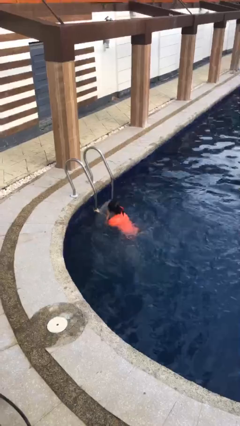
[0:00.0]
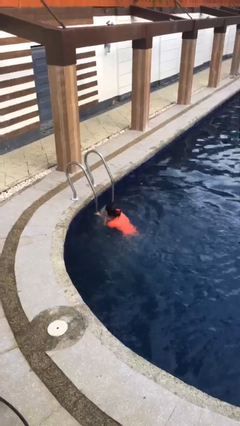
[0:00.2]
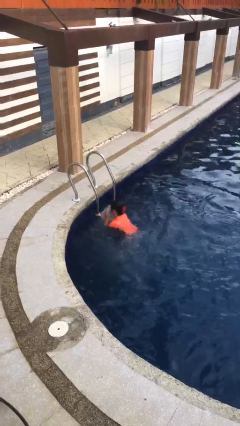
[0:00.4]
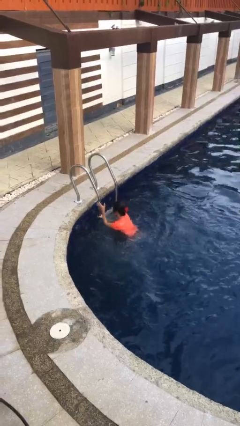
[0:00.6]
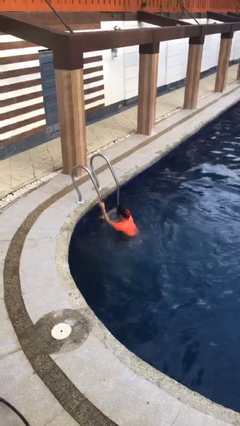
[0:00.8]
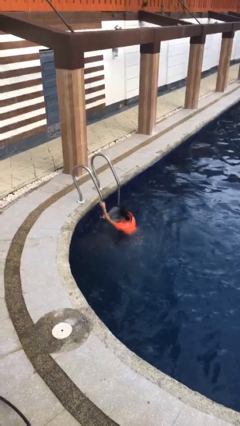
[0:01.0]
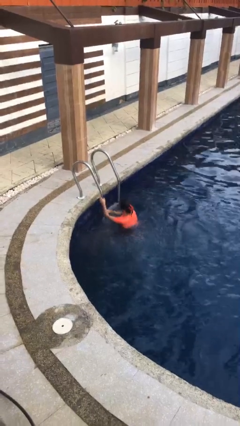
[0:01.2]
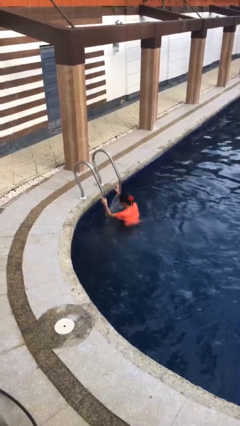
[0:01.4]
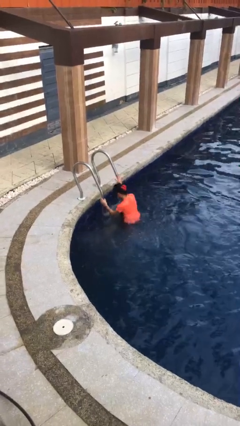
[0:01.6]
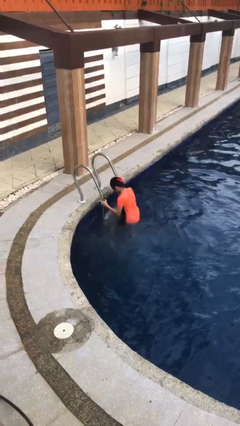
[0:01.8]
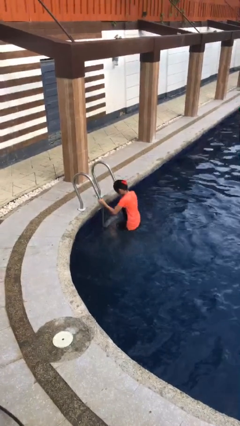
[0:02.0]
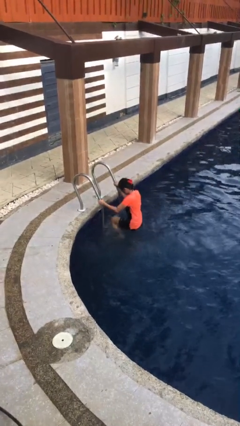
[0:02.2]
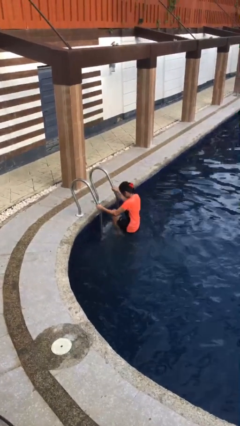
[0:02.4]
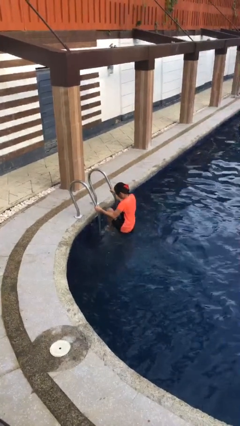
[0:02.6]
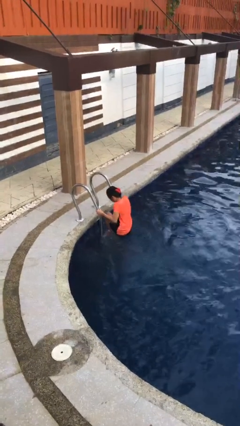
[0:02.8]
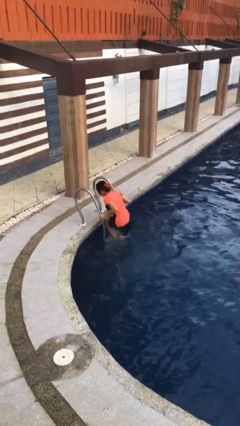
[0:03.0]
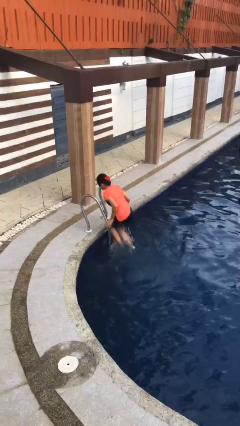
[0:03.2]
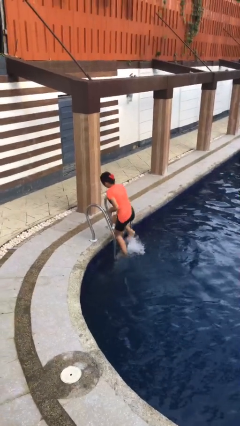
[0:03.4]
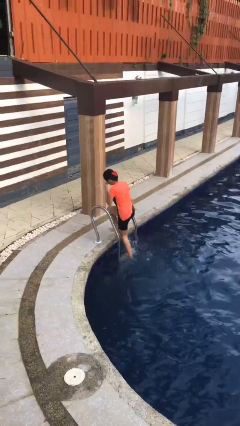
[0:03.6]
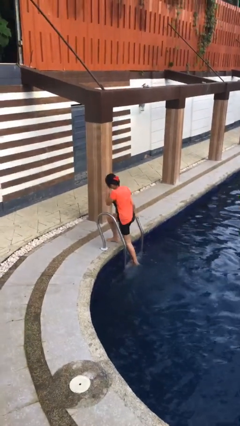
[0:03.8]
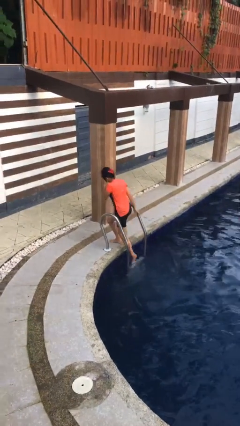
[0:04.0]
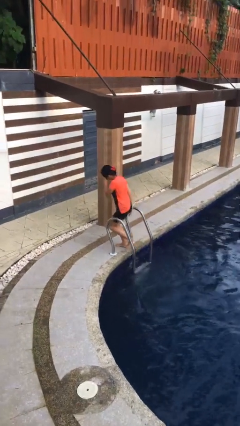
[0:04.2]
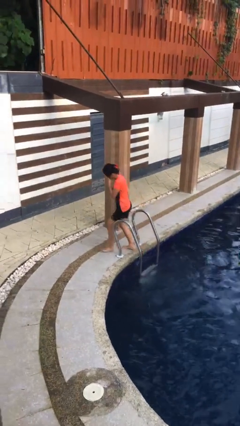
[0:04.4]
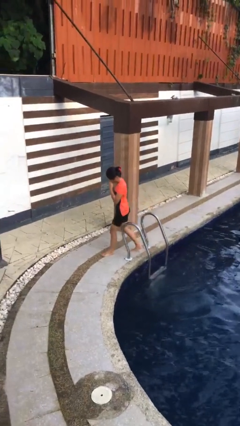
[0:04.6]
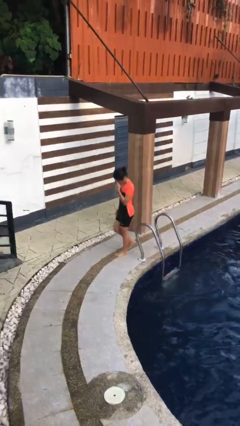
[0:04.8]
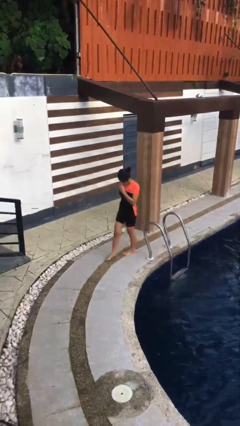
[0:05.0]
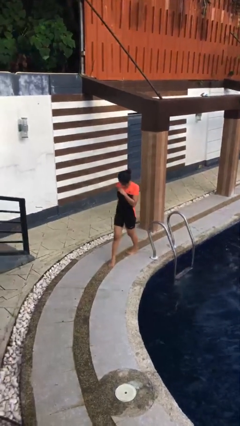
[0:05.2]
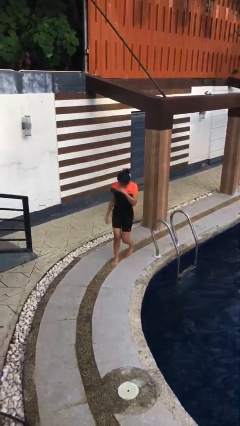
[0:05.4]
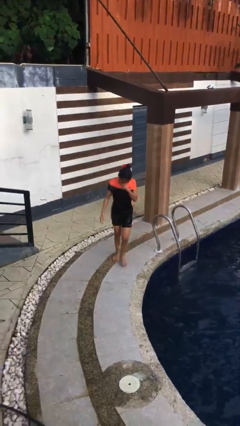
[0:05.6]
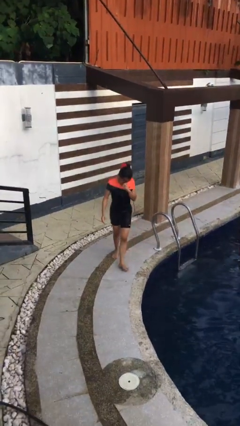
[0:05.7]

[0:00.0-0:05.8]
person exits pool

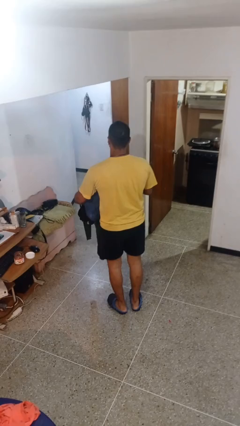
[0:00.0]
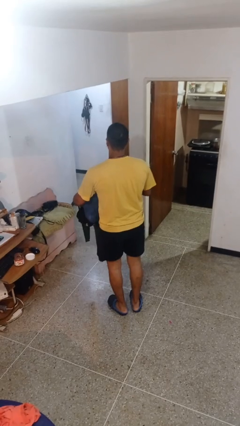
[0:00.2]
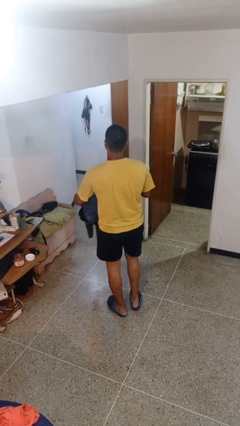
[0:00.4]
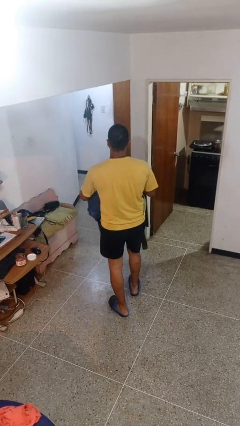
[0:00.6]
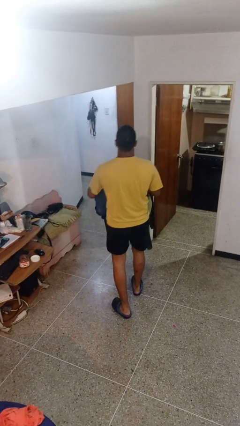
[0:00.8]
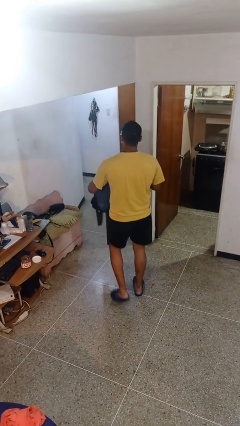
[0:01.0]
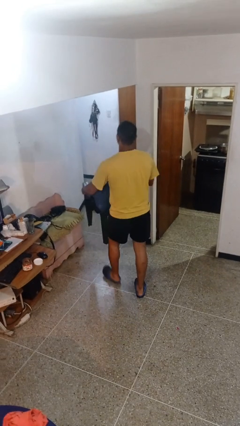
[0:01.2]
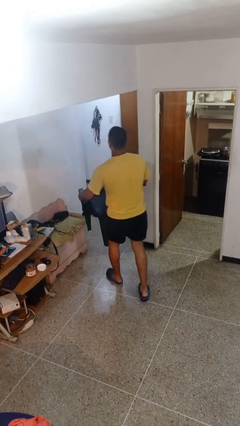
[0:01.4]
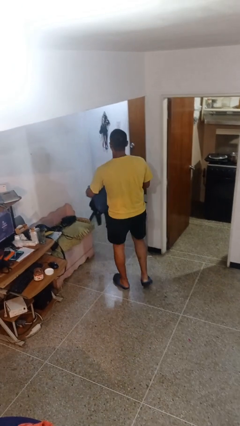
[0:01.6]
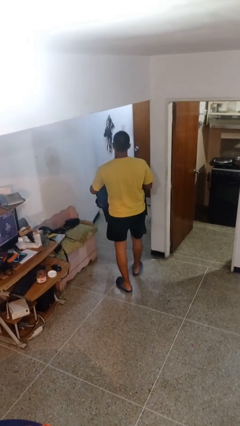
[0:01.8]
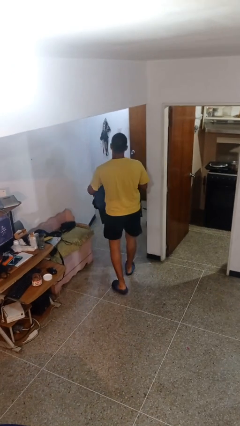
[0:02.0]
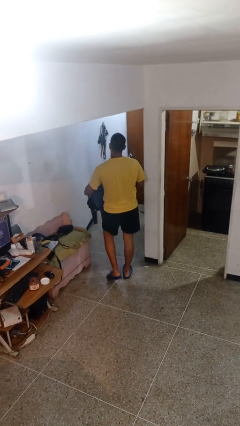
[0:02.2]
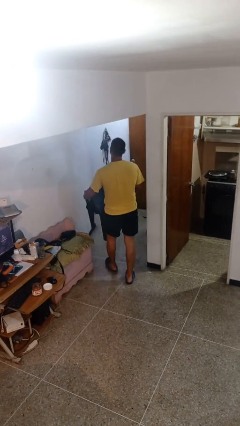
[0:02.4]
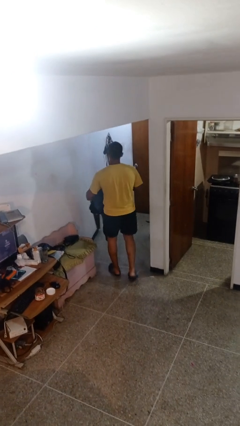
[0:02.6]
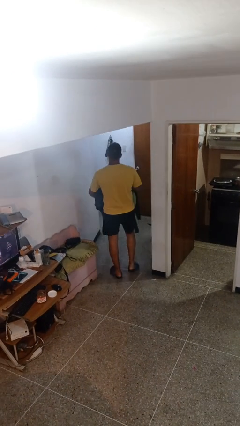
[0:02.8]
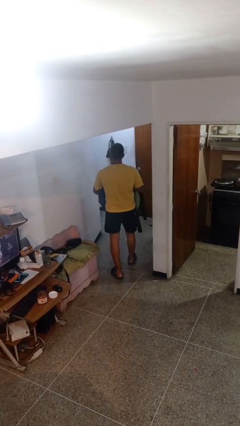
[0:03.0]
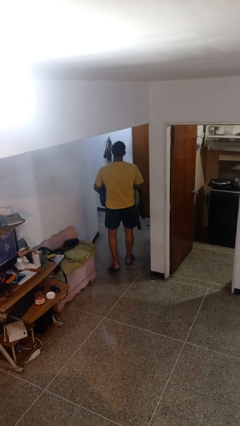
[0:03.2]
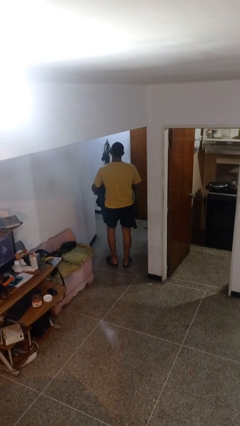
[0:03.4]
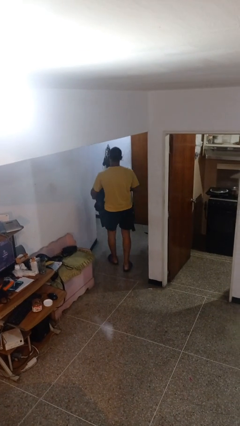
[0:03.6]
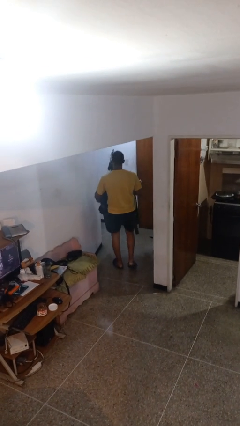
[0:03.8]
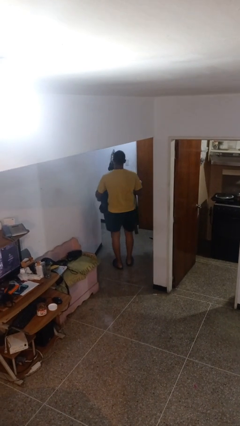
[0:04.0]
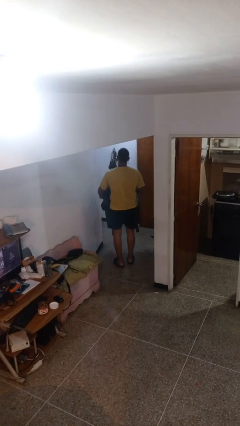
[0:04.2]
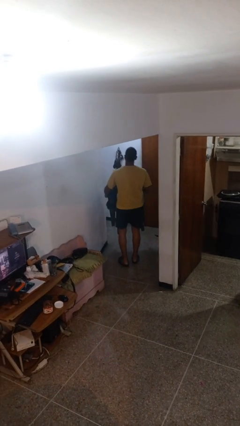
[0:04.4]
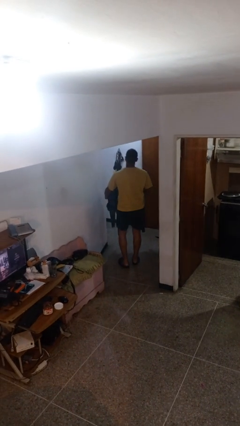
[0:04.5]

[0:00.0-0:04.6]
person carries furniture

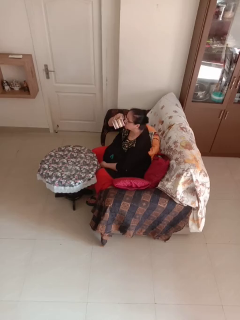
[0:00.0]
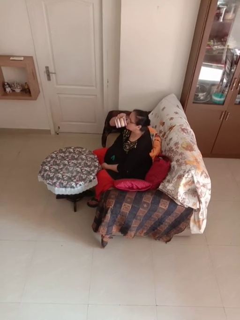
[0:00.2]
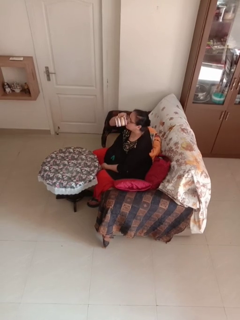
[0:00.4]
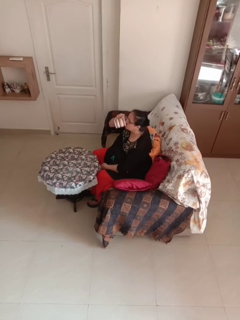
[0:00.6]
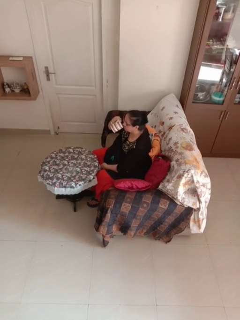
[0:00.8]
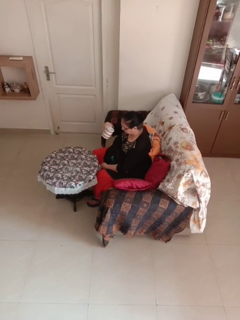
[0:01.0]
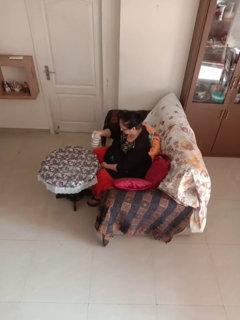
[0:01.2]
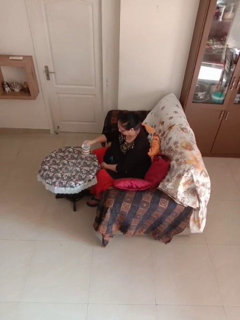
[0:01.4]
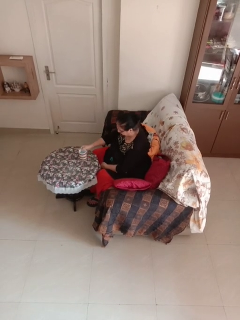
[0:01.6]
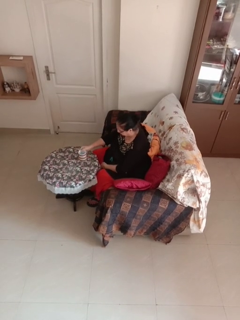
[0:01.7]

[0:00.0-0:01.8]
person drinks from mug

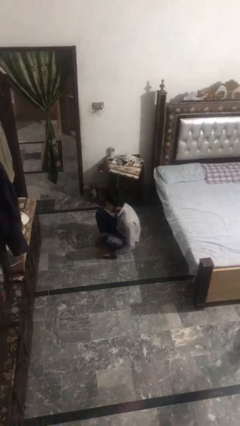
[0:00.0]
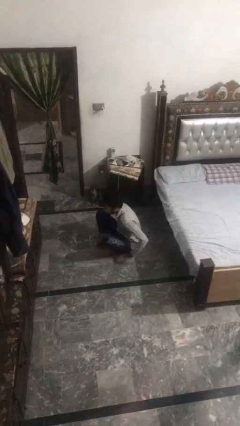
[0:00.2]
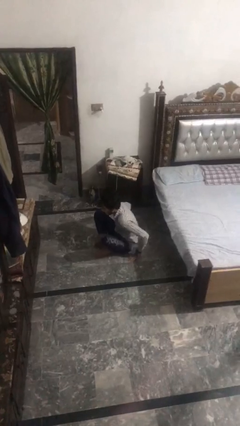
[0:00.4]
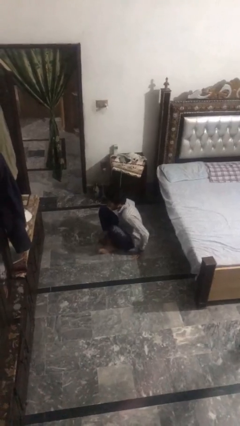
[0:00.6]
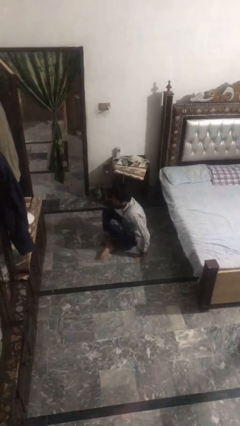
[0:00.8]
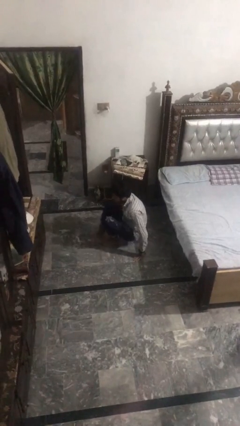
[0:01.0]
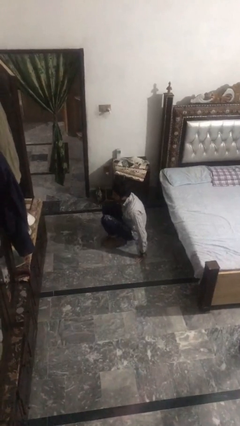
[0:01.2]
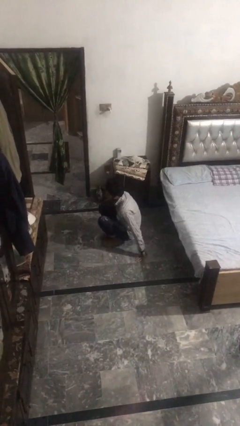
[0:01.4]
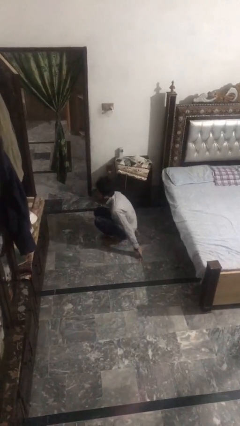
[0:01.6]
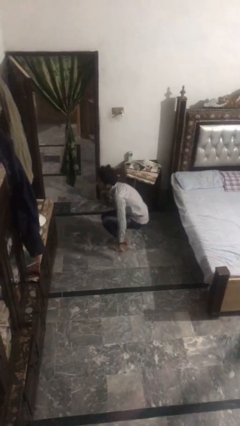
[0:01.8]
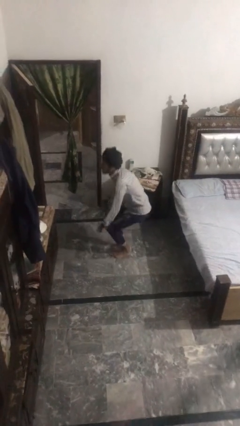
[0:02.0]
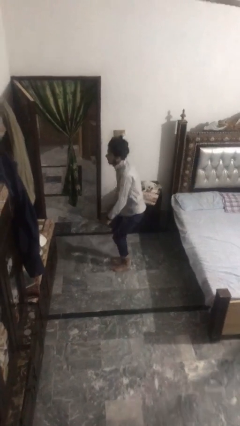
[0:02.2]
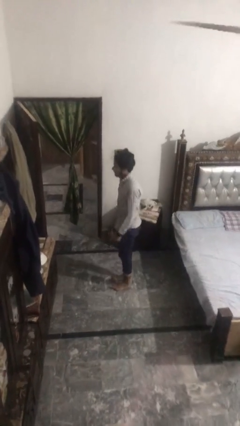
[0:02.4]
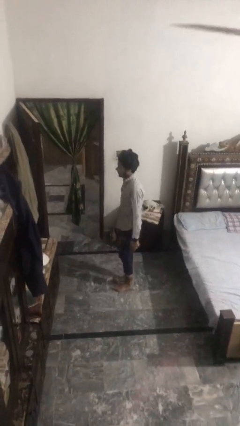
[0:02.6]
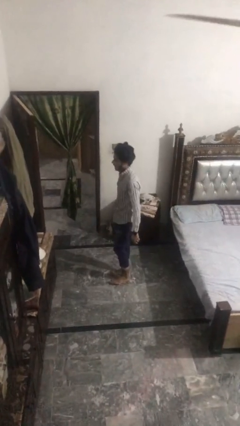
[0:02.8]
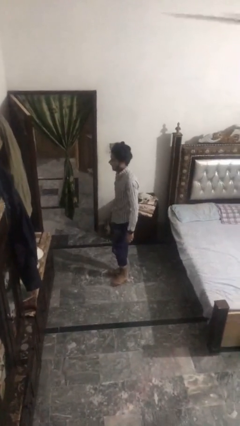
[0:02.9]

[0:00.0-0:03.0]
person stands up from floor

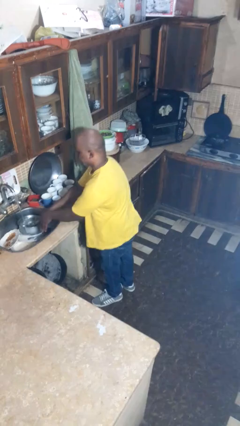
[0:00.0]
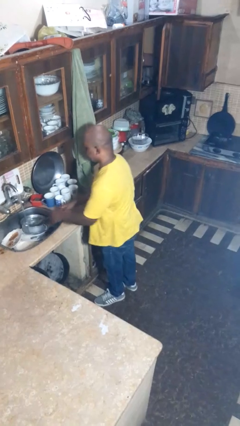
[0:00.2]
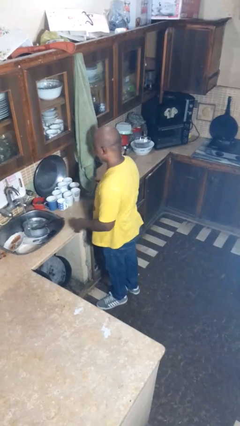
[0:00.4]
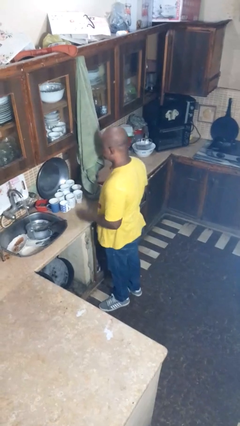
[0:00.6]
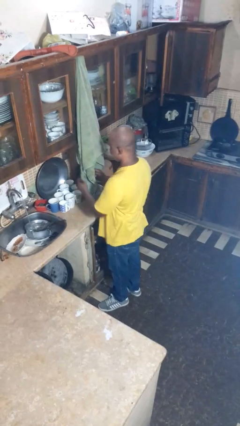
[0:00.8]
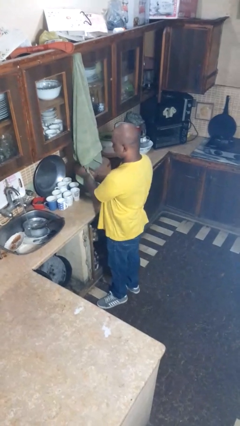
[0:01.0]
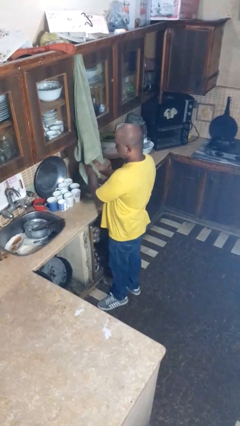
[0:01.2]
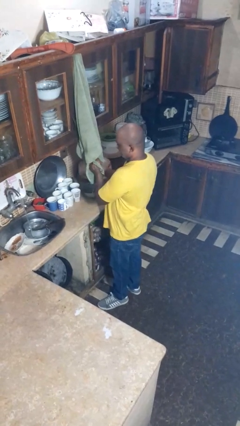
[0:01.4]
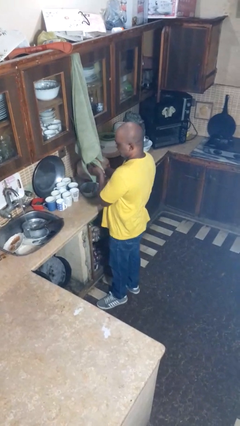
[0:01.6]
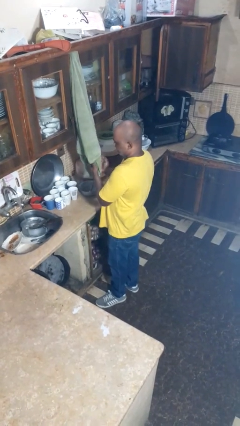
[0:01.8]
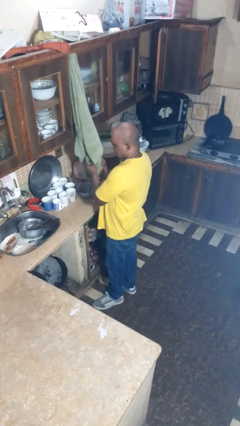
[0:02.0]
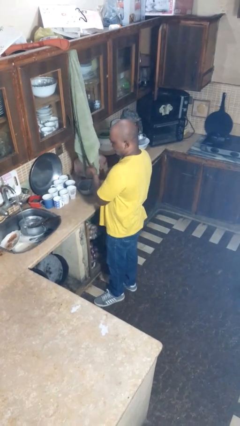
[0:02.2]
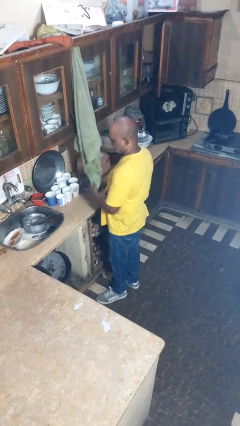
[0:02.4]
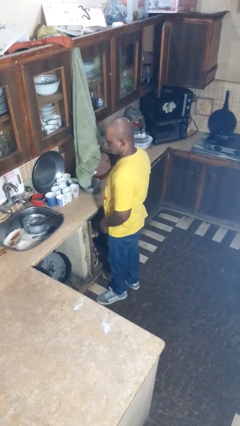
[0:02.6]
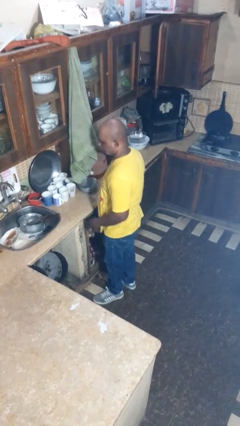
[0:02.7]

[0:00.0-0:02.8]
person dries hands with towel
